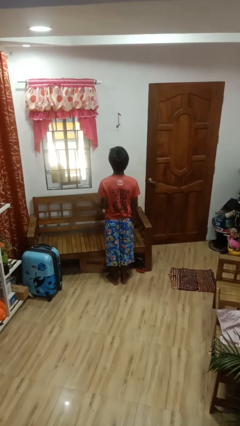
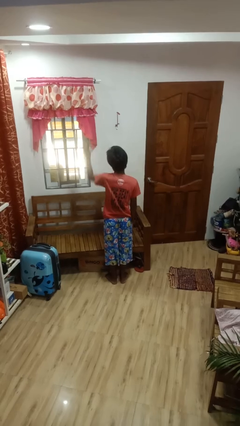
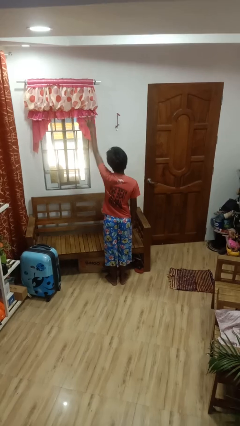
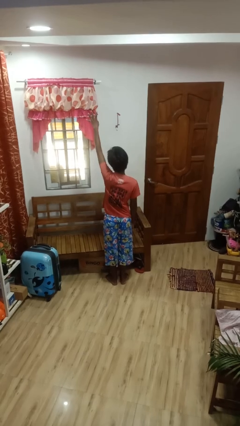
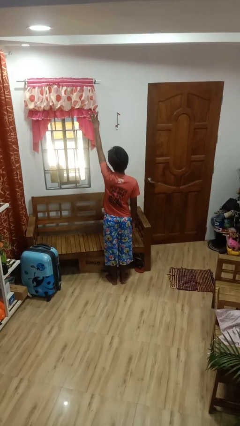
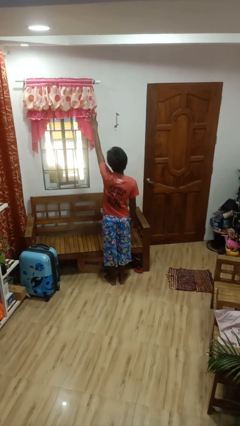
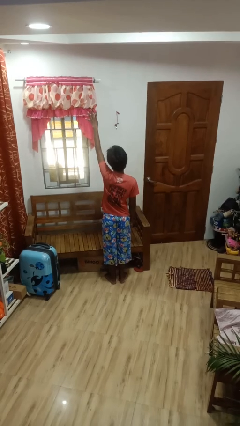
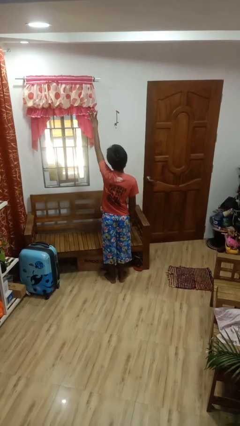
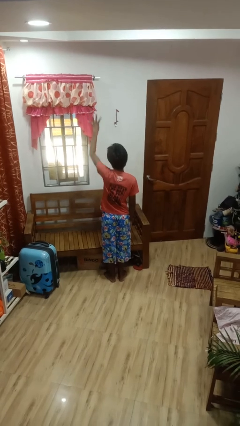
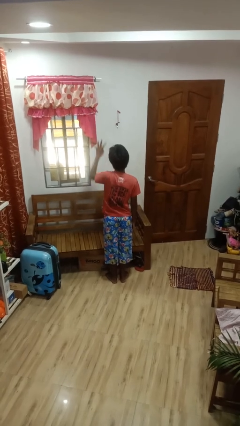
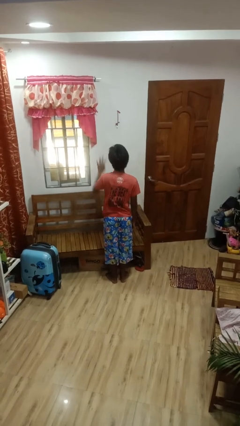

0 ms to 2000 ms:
person gestures number four

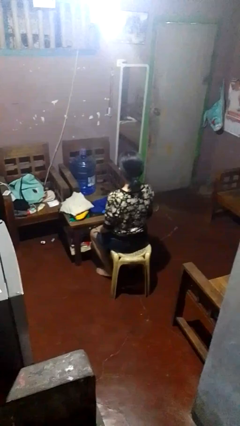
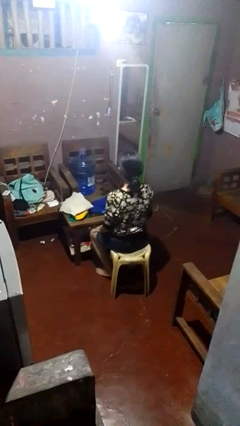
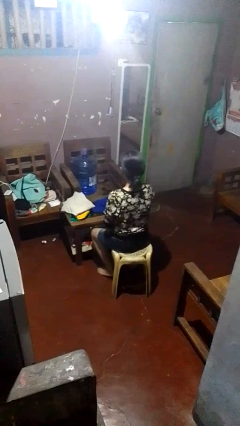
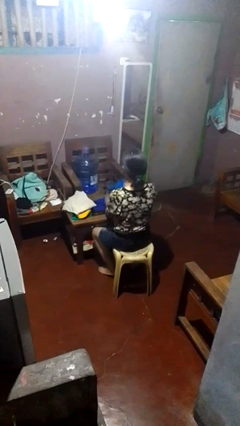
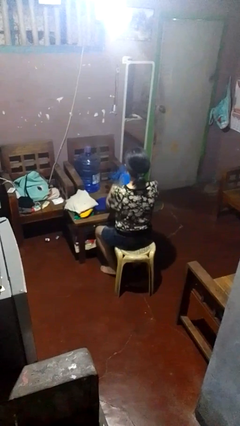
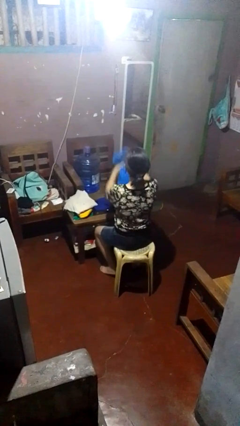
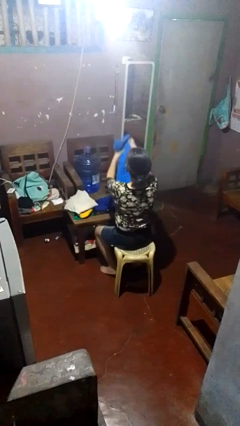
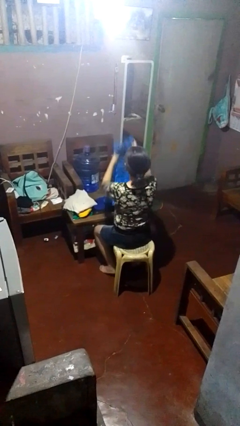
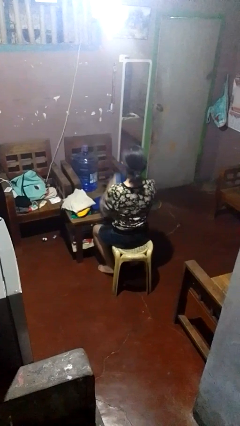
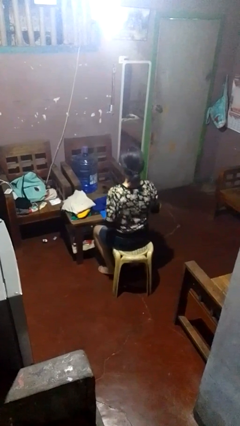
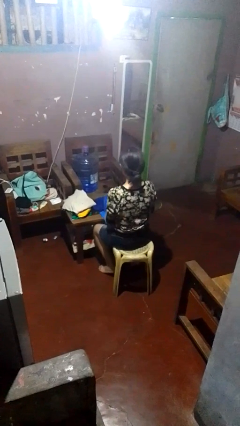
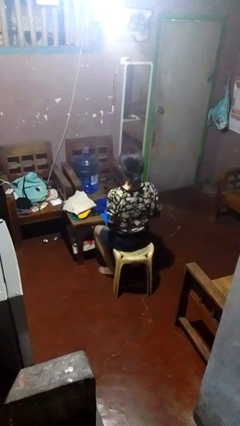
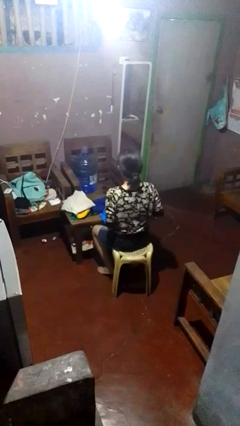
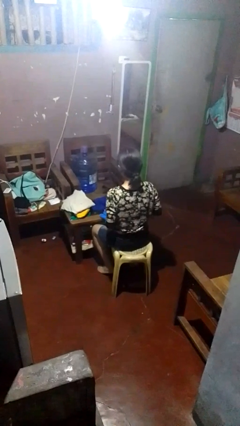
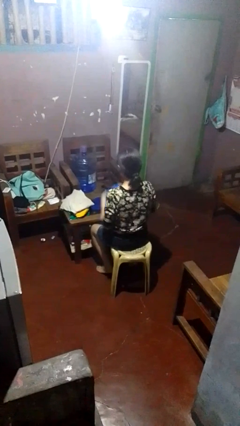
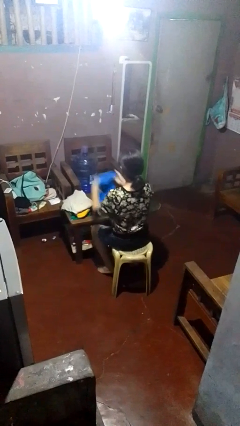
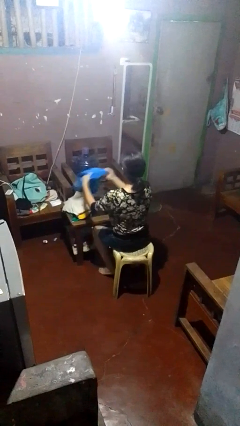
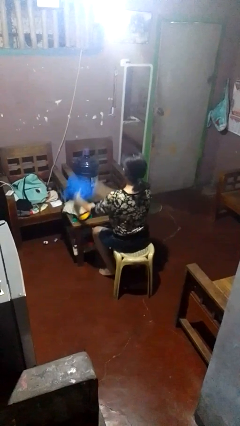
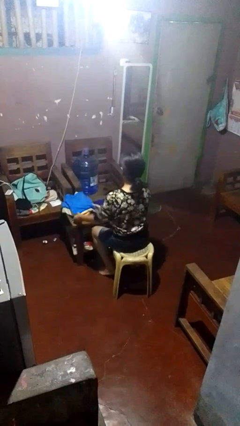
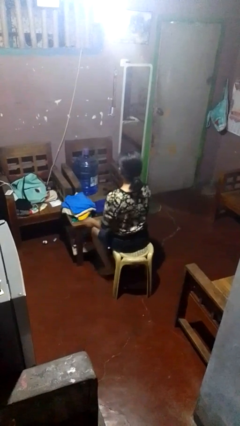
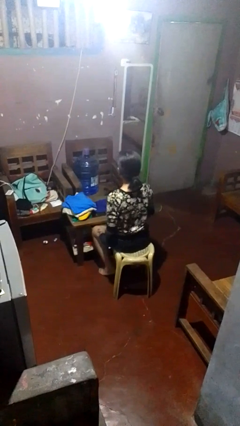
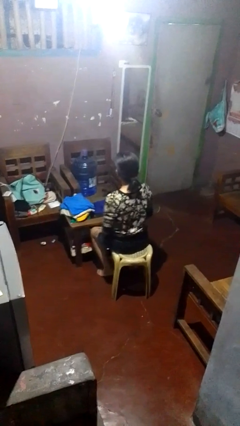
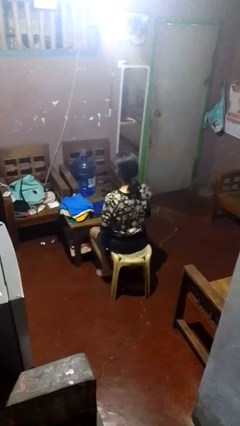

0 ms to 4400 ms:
person folds shirt

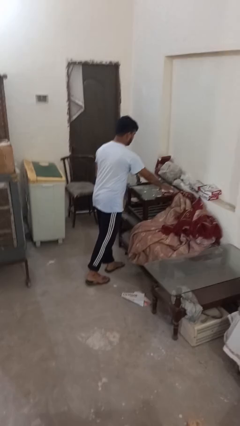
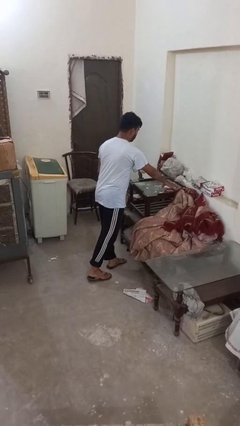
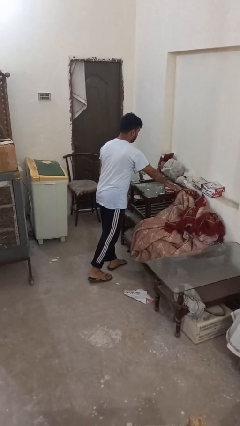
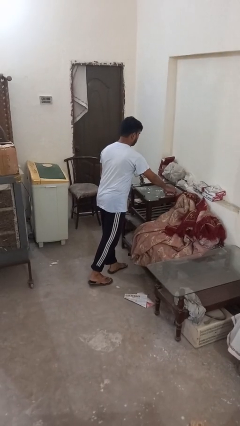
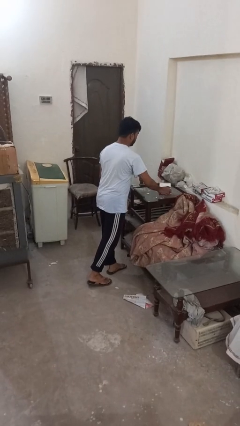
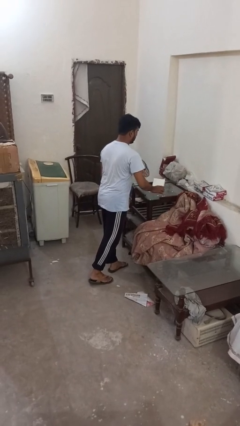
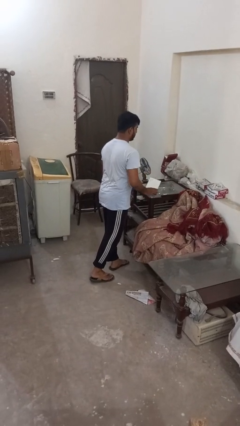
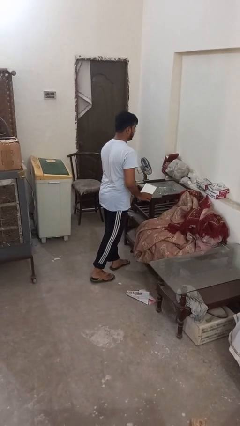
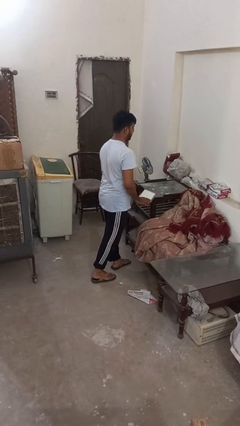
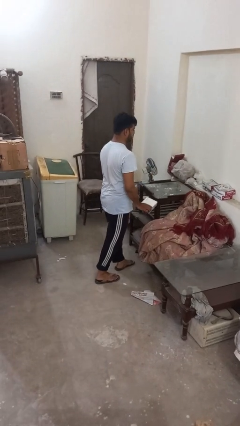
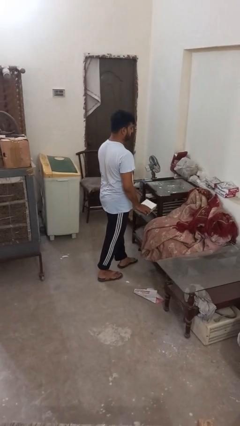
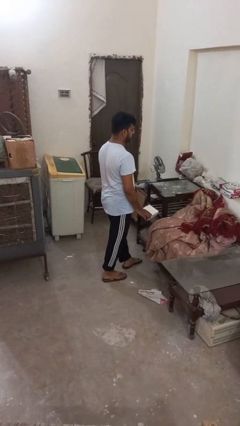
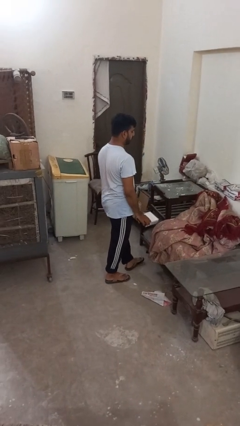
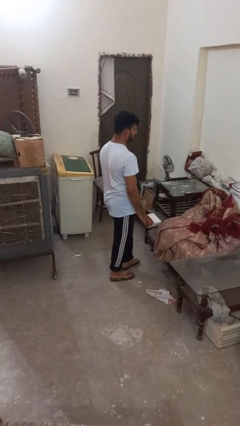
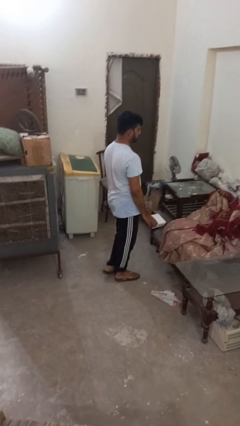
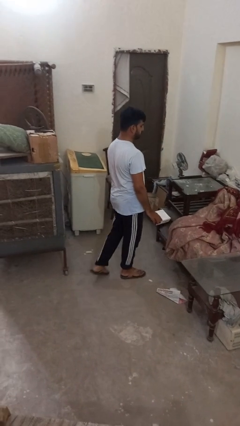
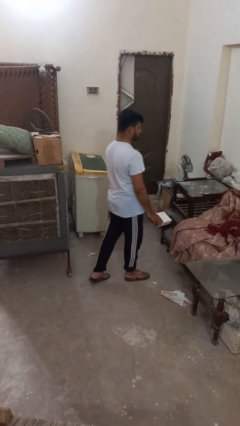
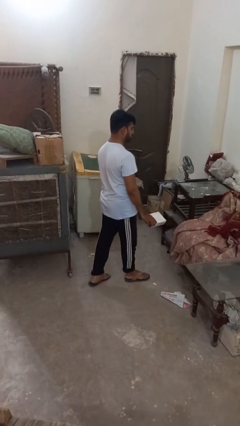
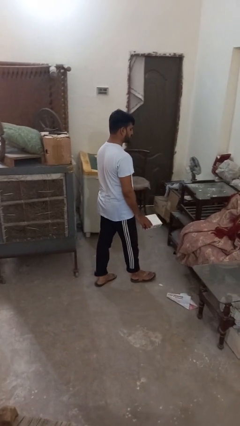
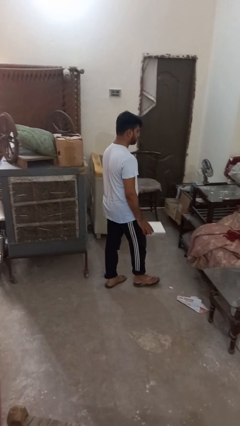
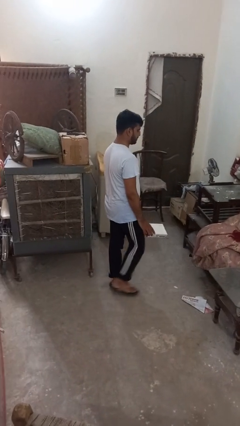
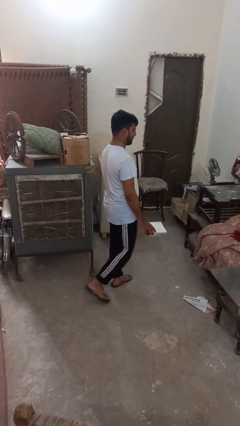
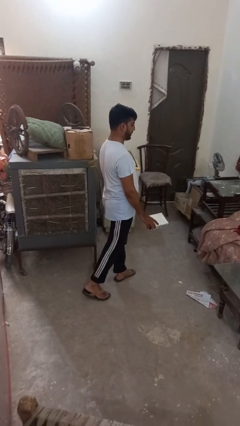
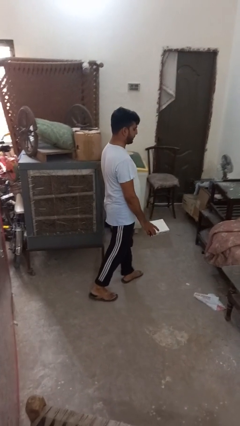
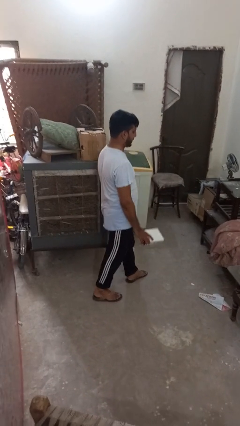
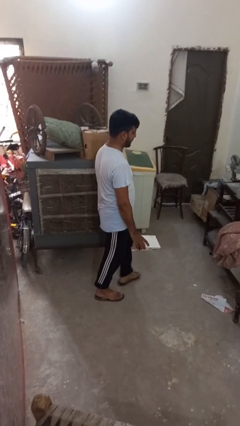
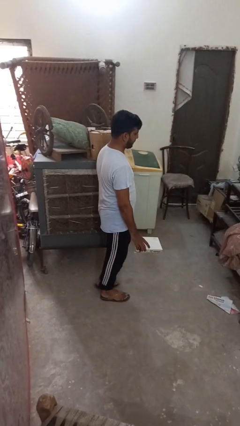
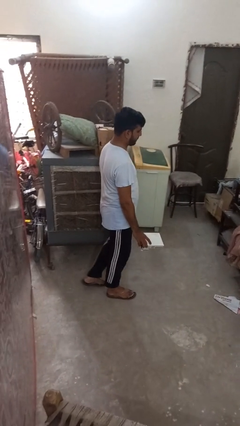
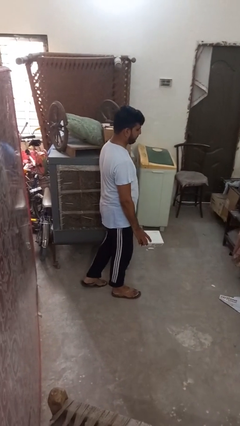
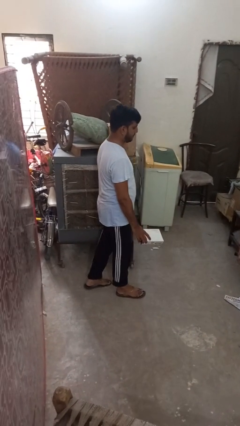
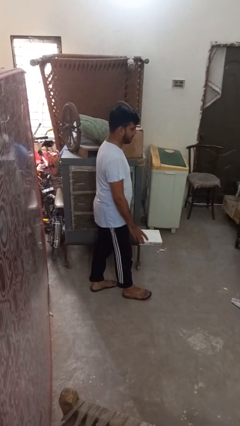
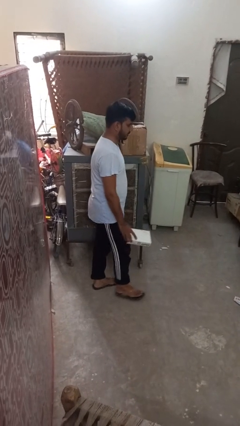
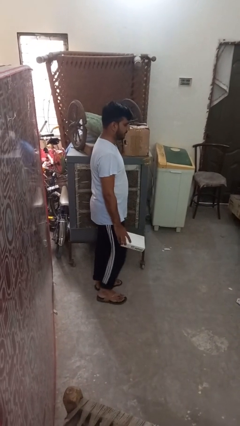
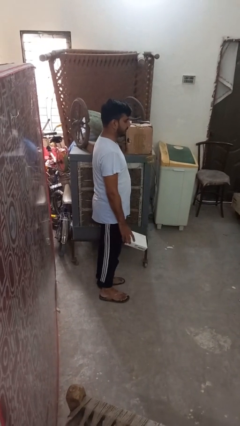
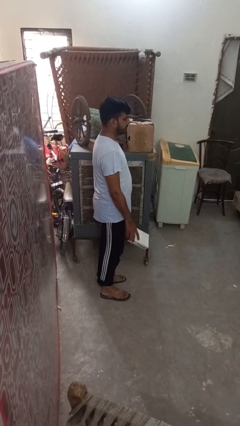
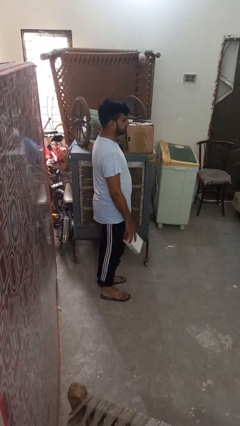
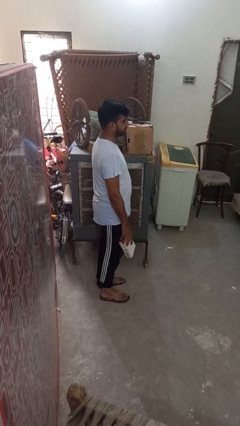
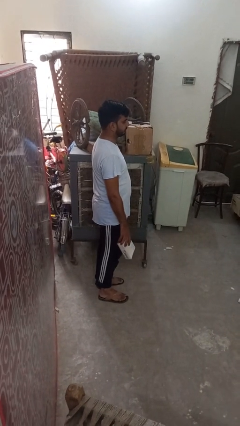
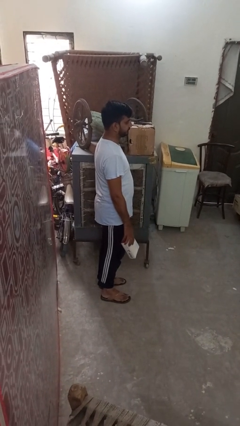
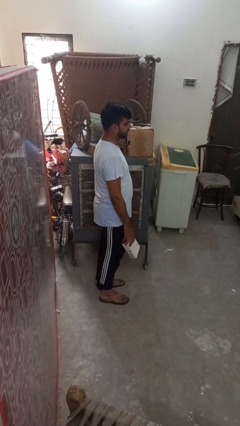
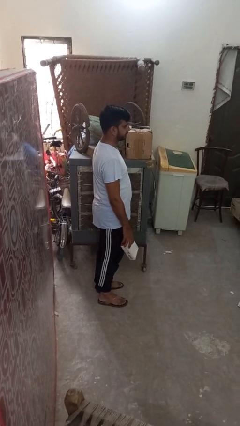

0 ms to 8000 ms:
person picks up object from table

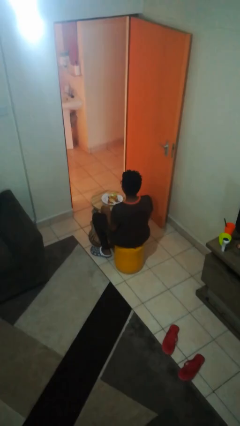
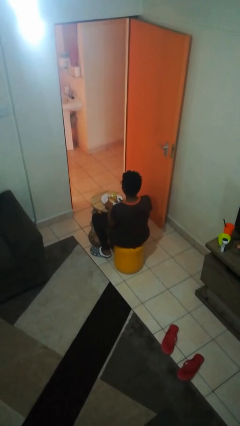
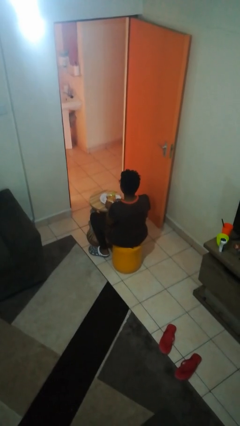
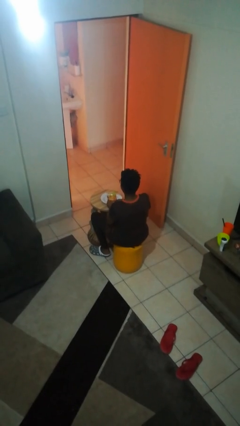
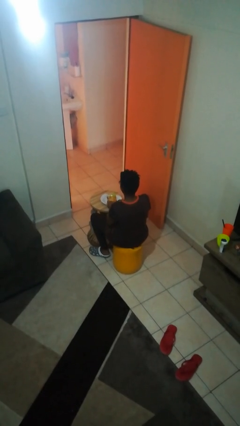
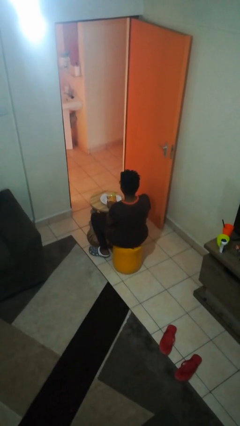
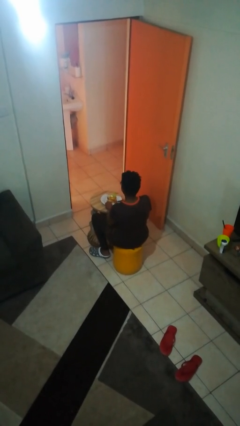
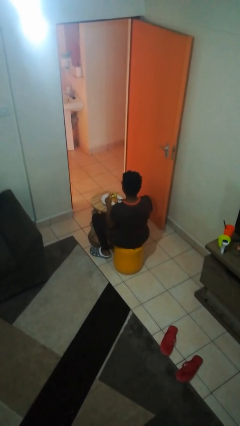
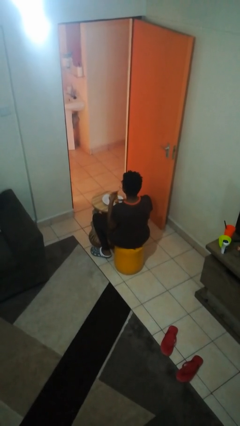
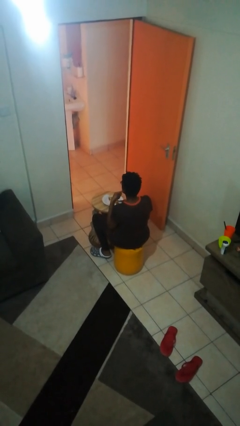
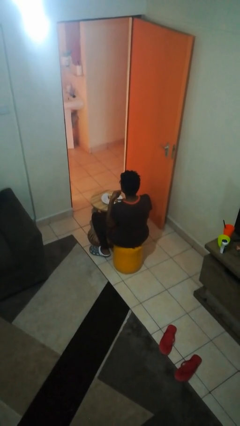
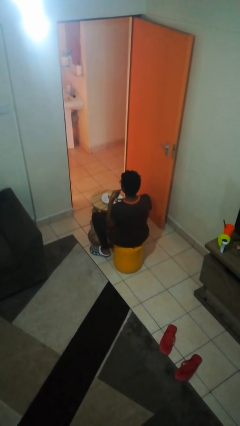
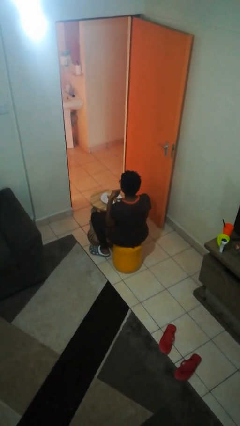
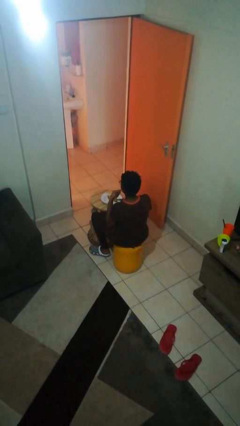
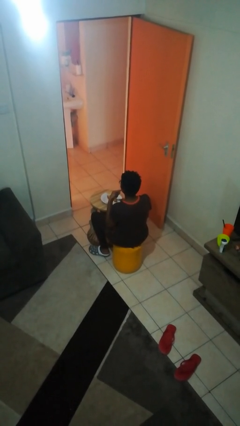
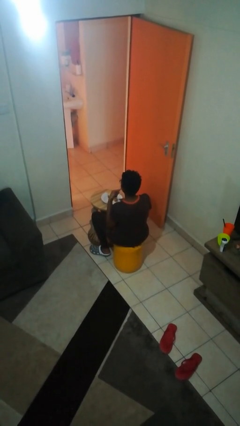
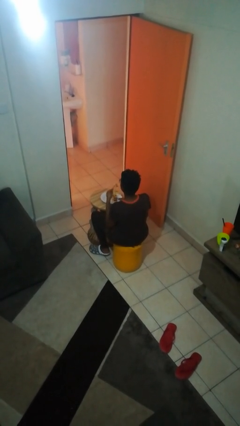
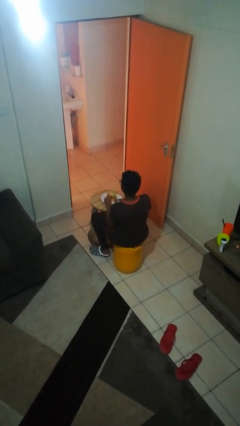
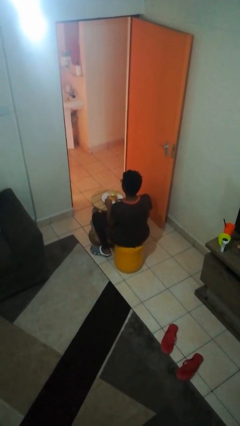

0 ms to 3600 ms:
person eats with utensil
